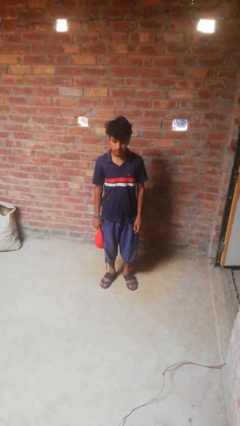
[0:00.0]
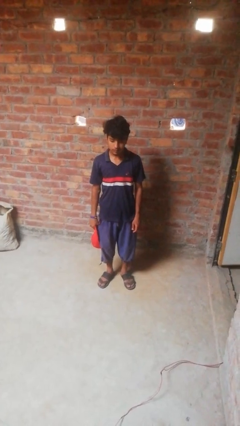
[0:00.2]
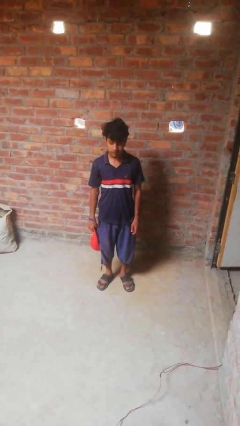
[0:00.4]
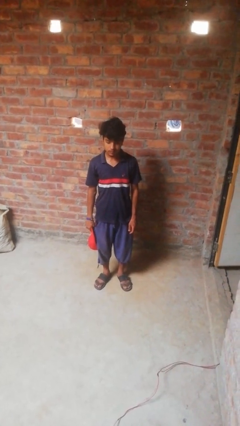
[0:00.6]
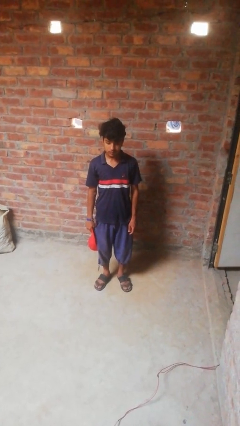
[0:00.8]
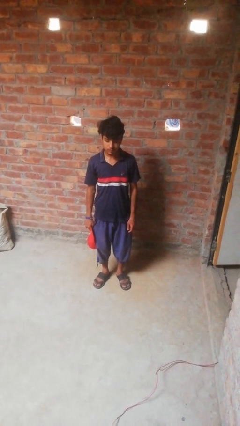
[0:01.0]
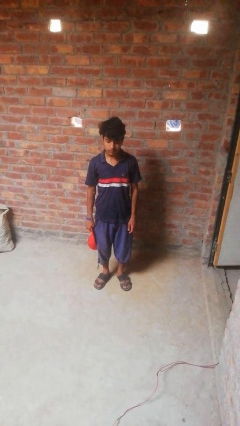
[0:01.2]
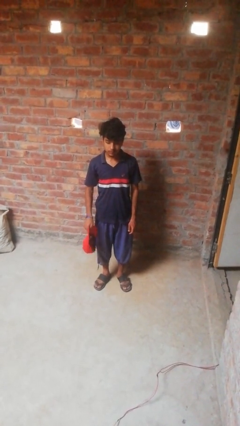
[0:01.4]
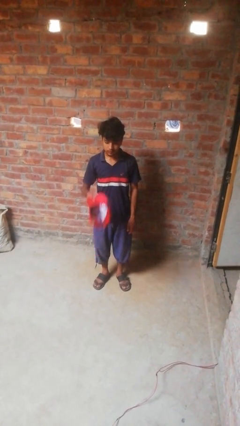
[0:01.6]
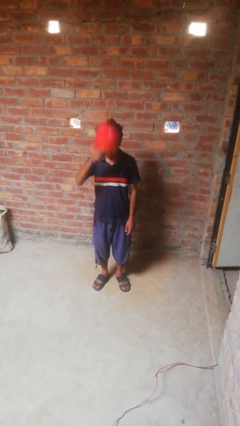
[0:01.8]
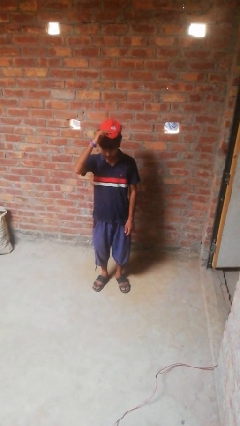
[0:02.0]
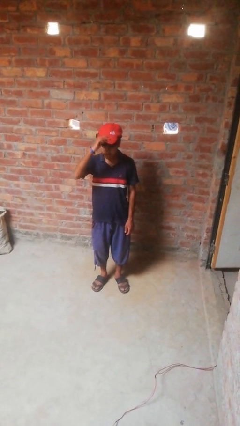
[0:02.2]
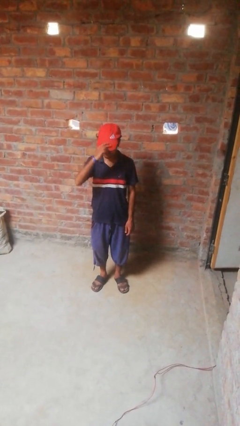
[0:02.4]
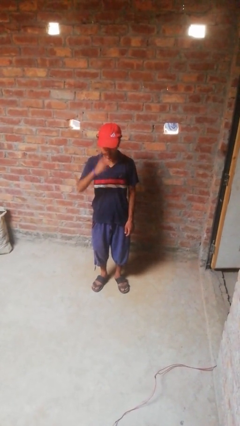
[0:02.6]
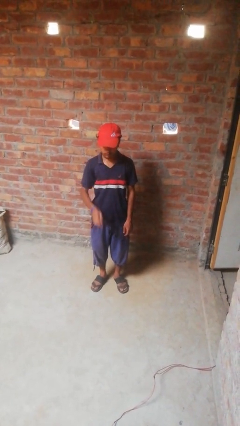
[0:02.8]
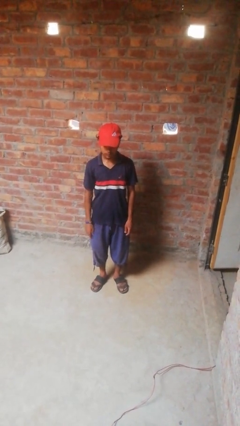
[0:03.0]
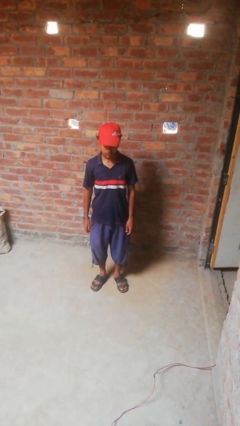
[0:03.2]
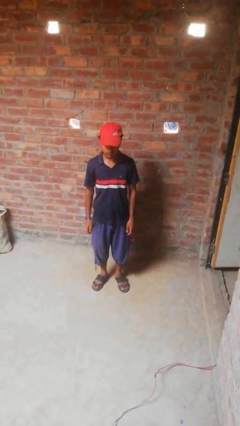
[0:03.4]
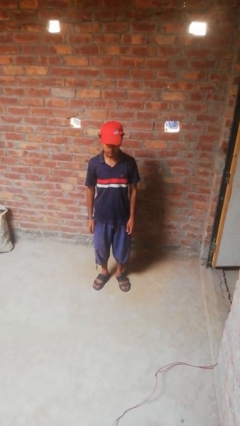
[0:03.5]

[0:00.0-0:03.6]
person puts on hat

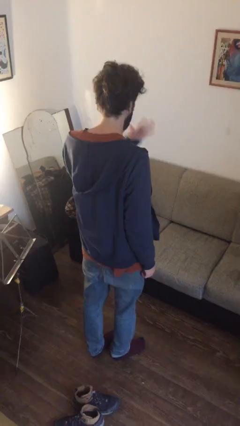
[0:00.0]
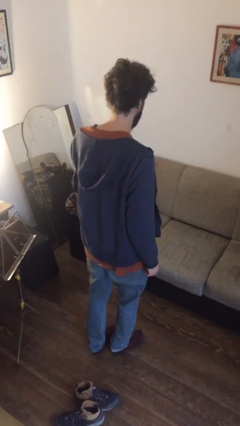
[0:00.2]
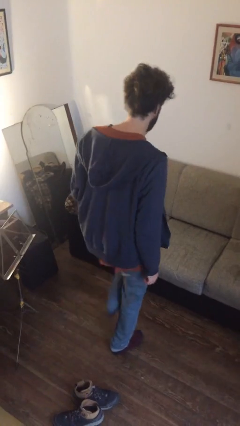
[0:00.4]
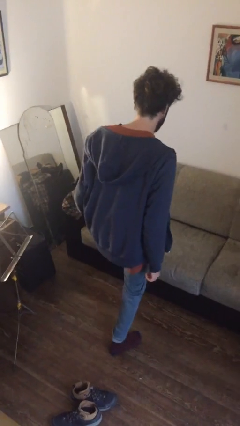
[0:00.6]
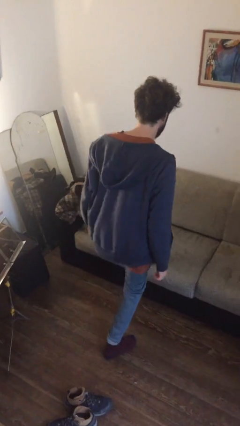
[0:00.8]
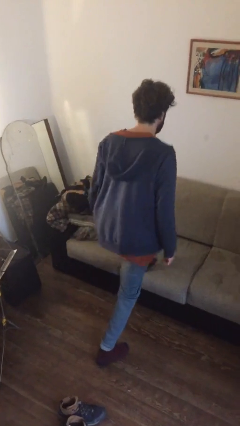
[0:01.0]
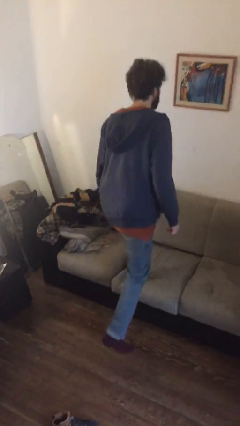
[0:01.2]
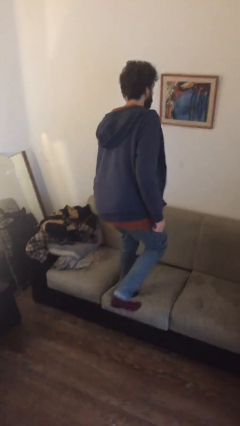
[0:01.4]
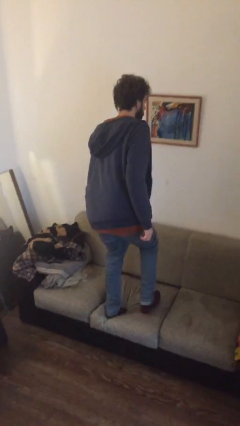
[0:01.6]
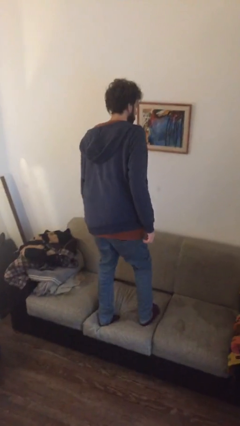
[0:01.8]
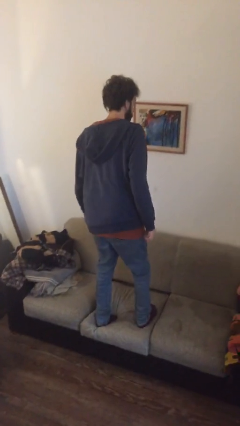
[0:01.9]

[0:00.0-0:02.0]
person climbs on couch

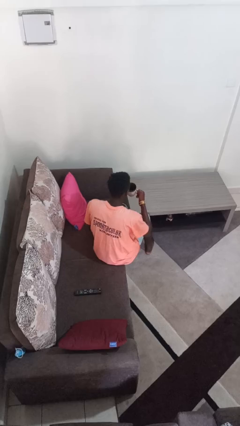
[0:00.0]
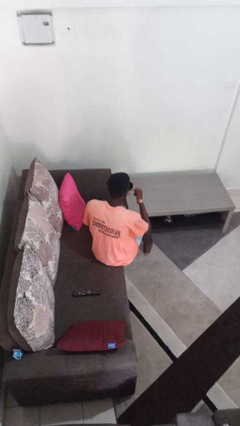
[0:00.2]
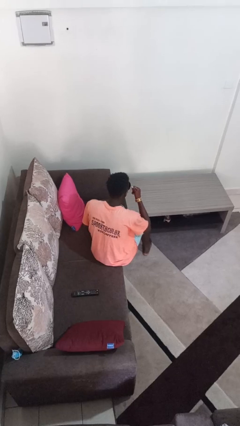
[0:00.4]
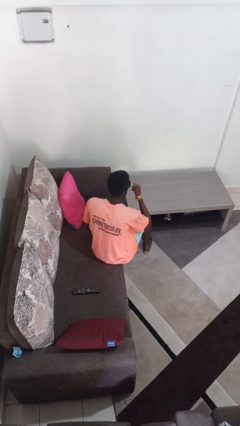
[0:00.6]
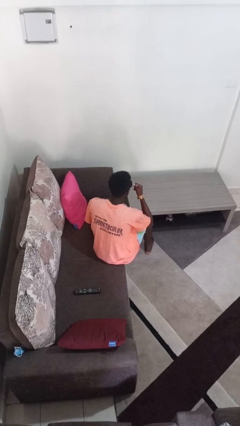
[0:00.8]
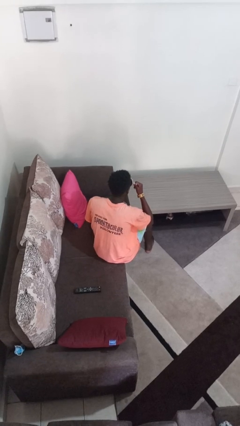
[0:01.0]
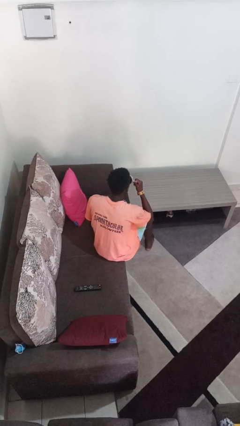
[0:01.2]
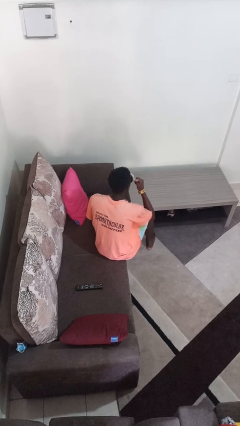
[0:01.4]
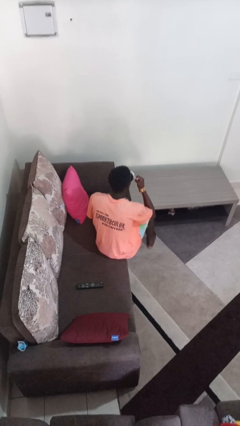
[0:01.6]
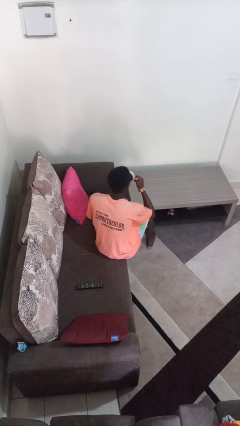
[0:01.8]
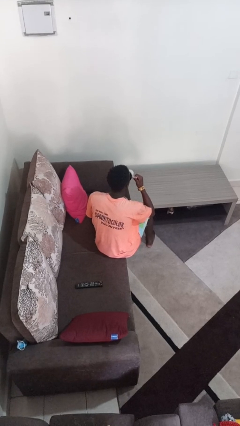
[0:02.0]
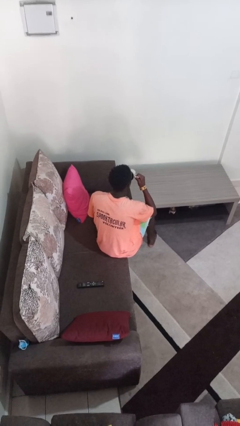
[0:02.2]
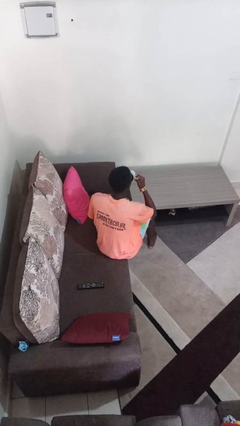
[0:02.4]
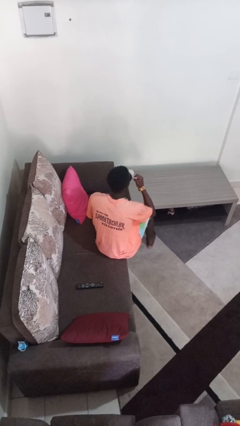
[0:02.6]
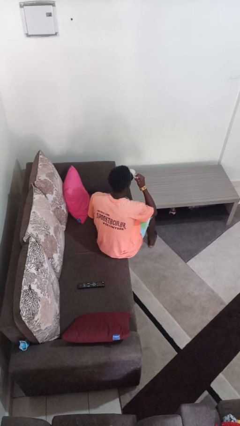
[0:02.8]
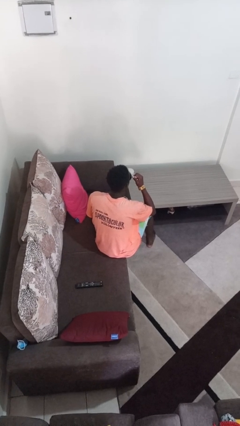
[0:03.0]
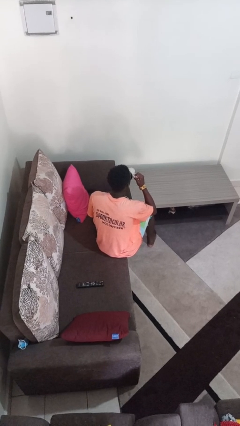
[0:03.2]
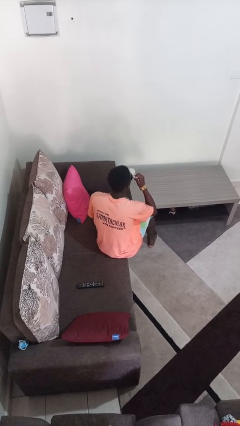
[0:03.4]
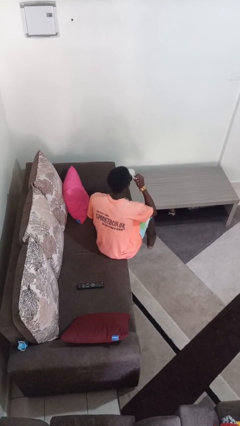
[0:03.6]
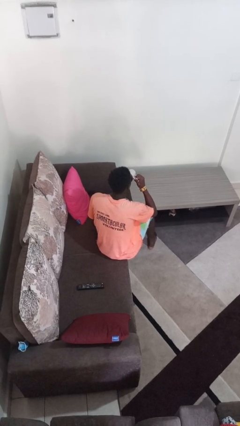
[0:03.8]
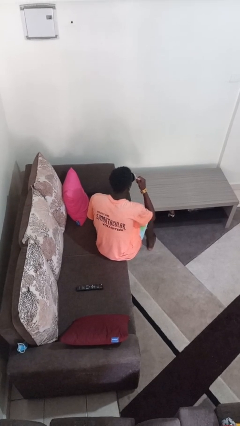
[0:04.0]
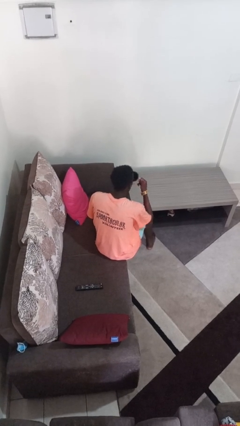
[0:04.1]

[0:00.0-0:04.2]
person drinks from mug

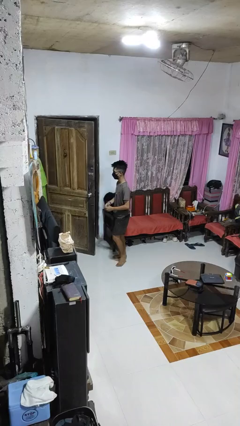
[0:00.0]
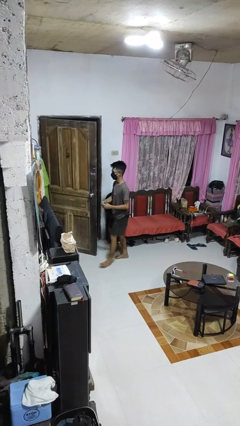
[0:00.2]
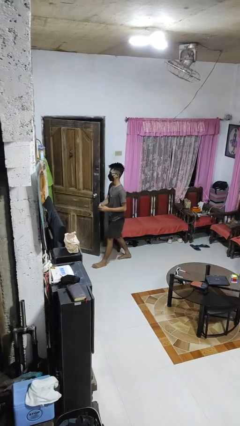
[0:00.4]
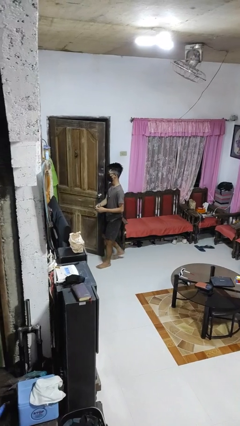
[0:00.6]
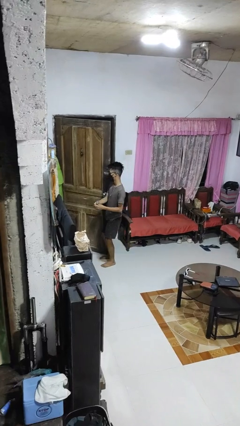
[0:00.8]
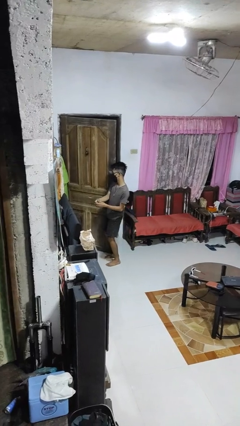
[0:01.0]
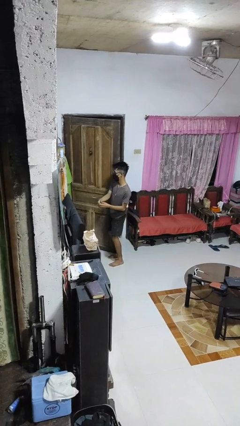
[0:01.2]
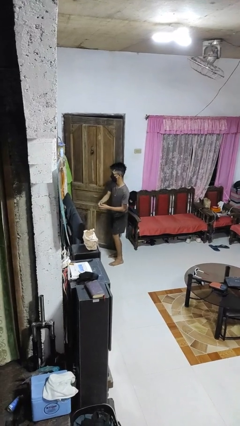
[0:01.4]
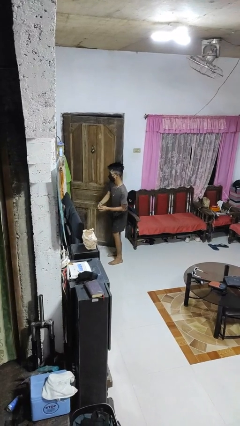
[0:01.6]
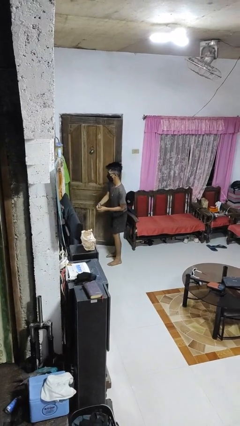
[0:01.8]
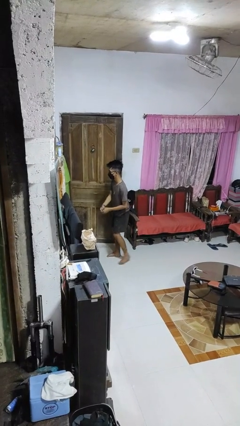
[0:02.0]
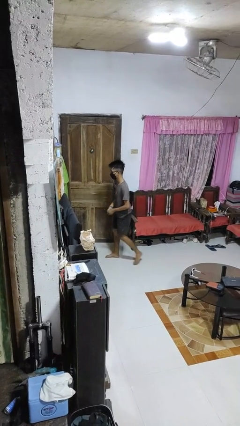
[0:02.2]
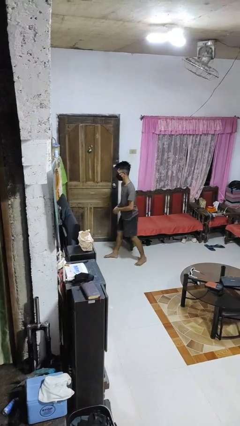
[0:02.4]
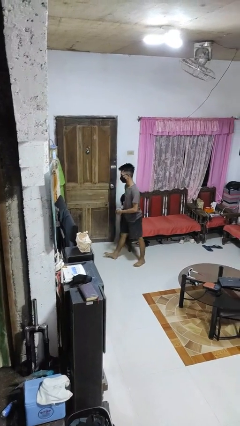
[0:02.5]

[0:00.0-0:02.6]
person closes door with hip

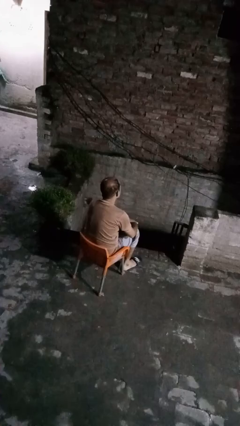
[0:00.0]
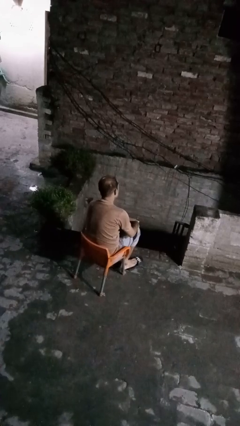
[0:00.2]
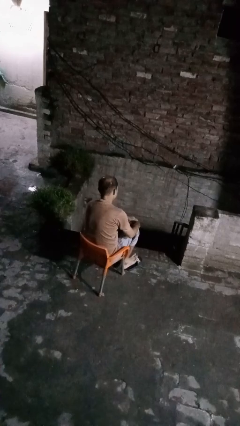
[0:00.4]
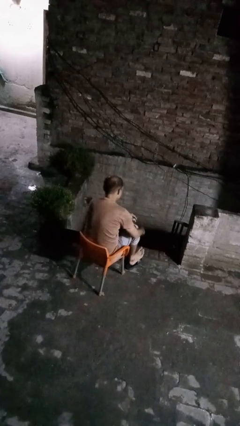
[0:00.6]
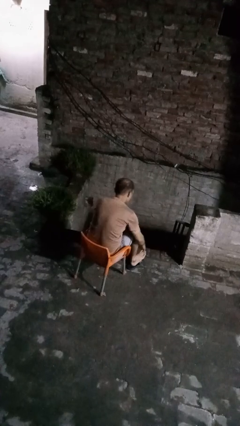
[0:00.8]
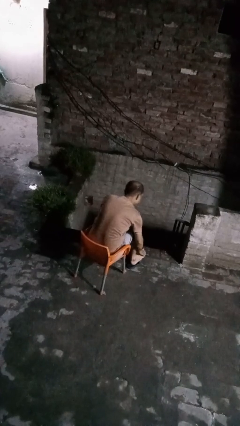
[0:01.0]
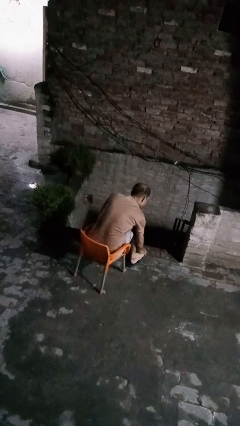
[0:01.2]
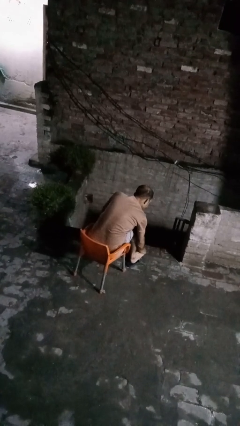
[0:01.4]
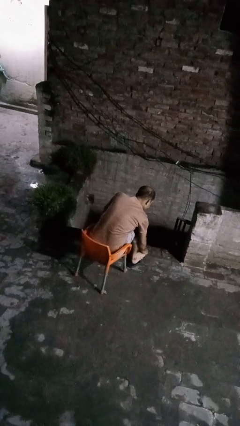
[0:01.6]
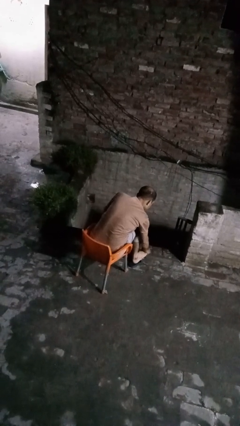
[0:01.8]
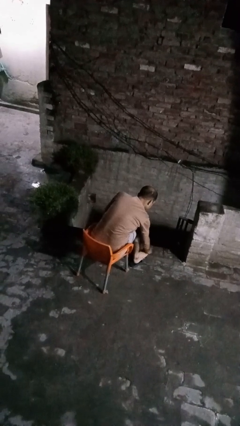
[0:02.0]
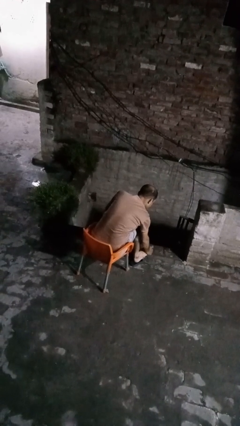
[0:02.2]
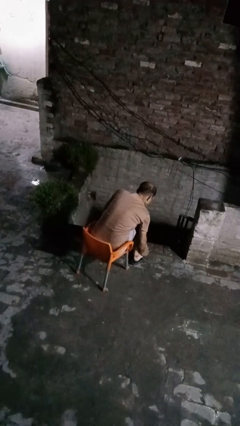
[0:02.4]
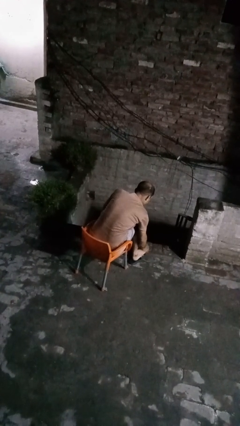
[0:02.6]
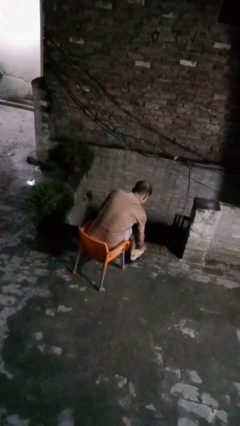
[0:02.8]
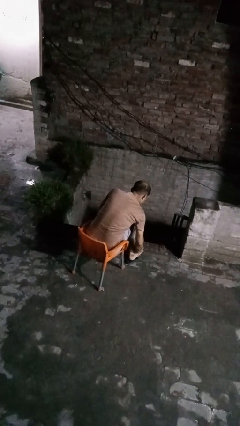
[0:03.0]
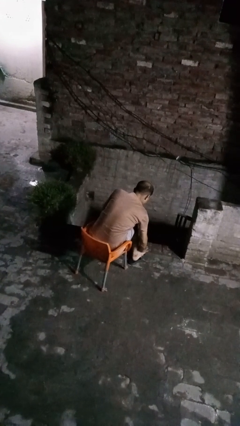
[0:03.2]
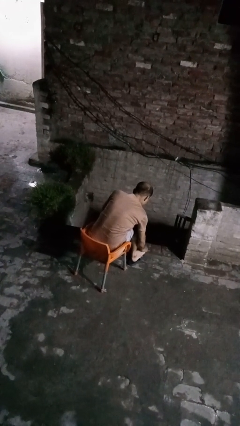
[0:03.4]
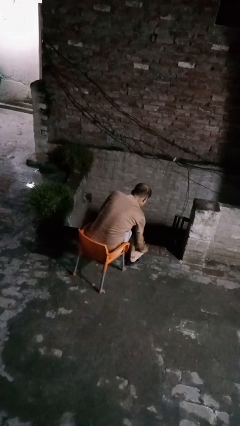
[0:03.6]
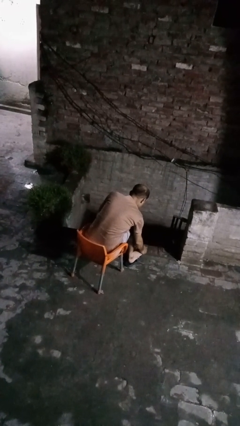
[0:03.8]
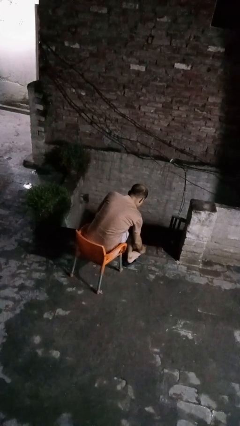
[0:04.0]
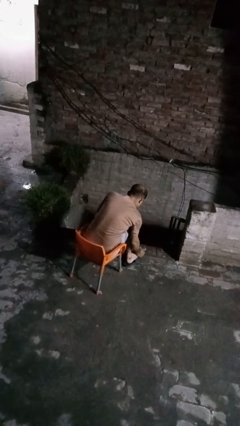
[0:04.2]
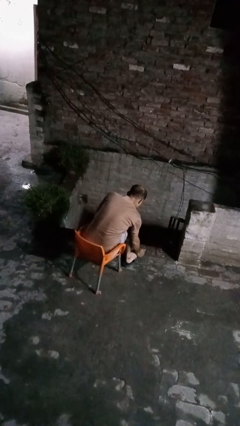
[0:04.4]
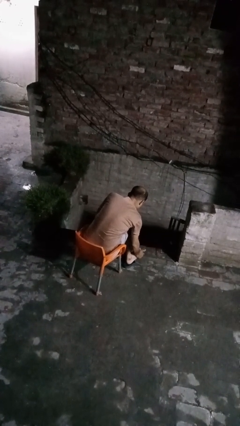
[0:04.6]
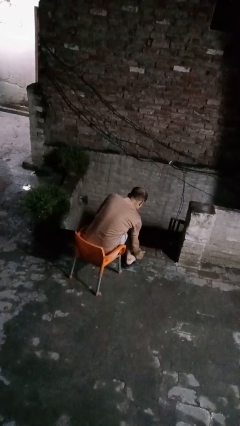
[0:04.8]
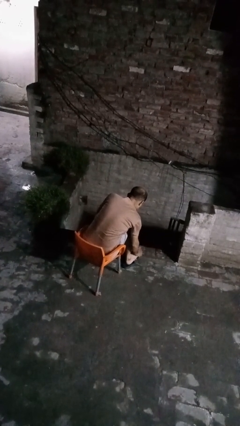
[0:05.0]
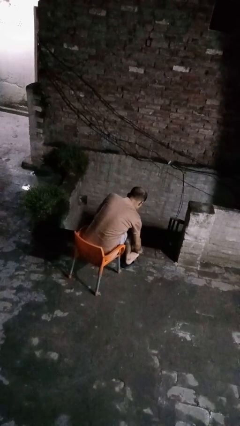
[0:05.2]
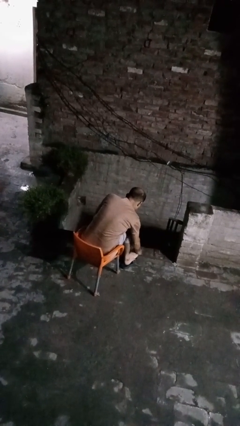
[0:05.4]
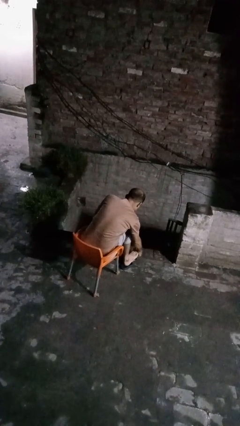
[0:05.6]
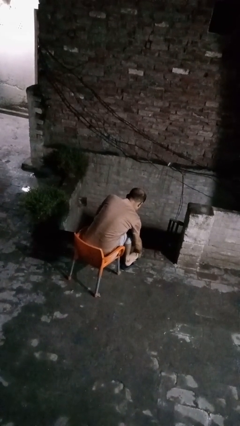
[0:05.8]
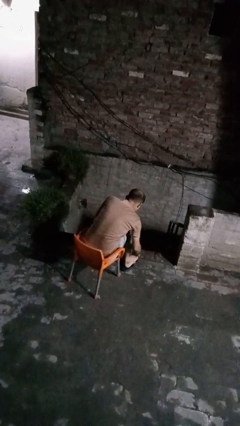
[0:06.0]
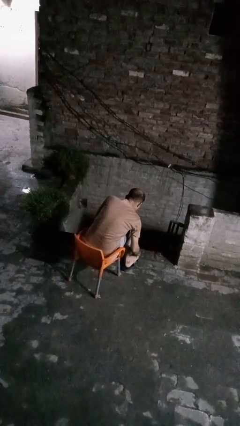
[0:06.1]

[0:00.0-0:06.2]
person rubs foot
